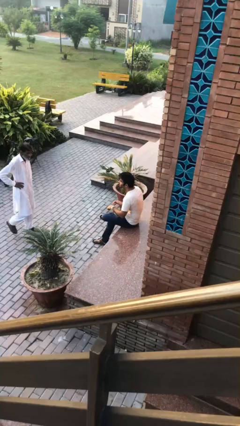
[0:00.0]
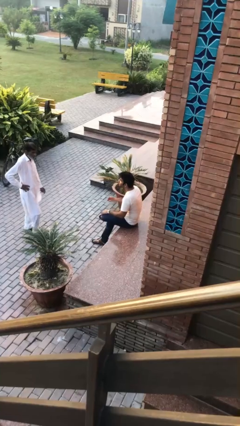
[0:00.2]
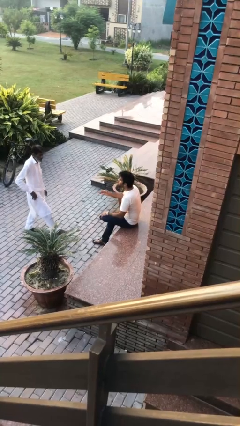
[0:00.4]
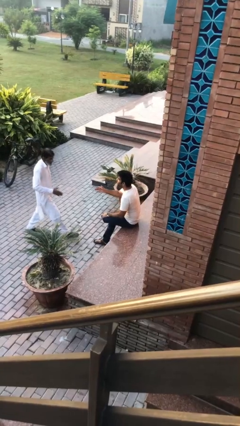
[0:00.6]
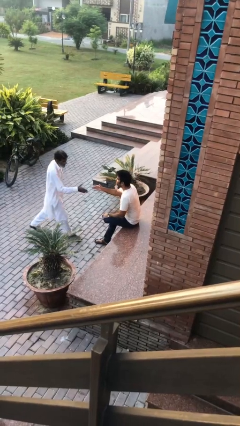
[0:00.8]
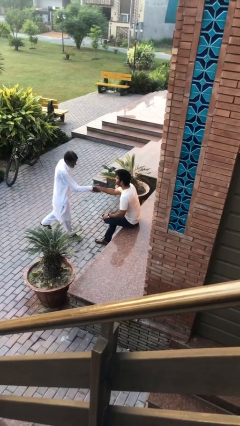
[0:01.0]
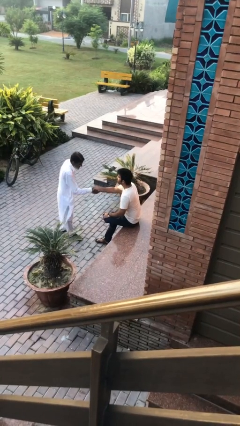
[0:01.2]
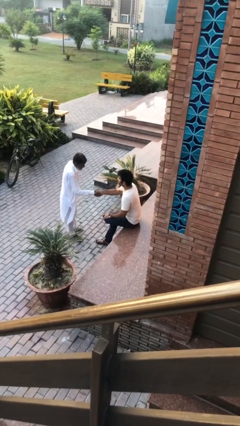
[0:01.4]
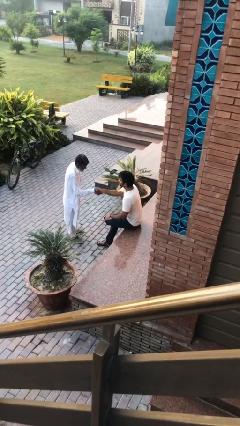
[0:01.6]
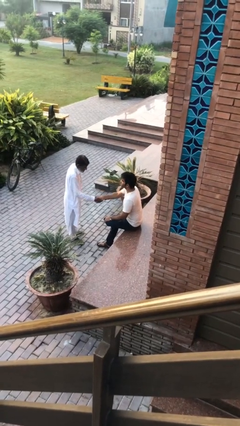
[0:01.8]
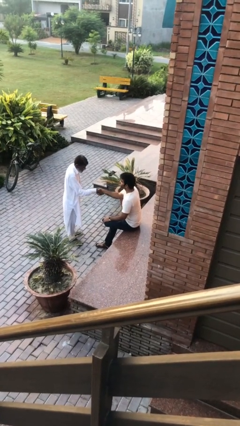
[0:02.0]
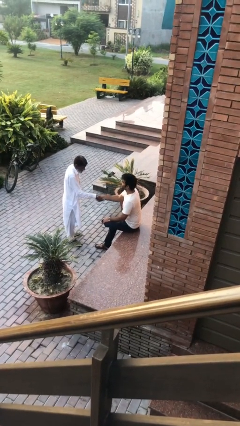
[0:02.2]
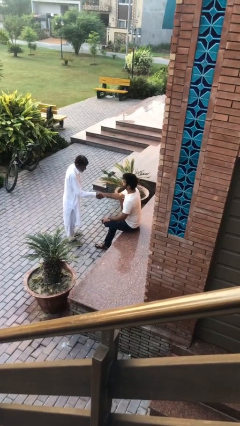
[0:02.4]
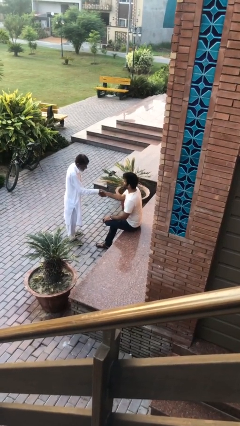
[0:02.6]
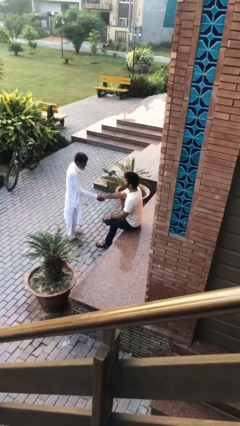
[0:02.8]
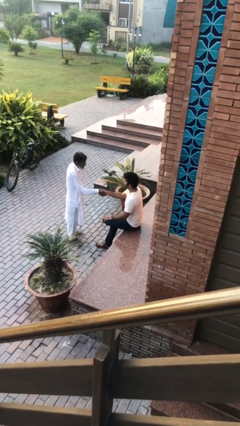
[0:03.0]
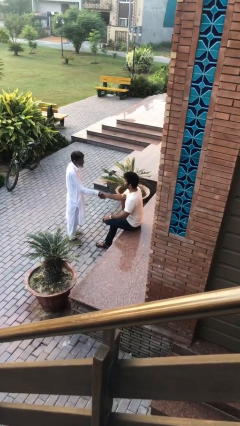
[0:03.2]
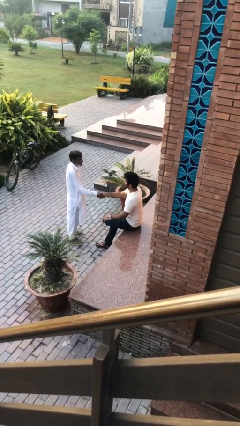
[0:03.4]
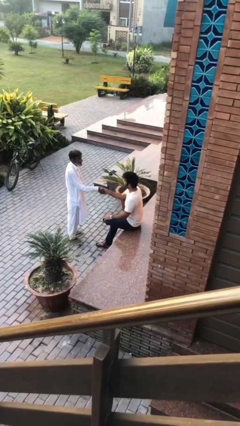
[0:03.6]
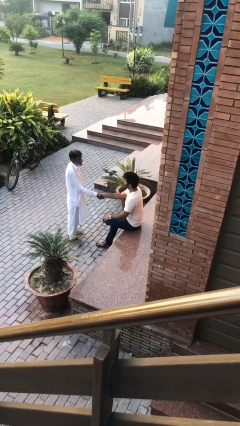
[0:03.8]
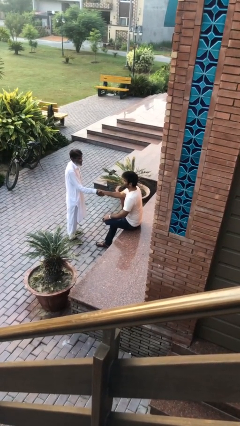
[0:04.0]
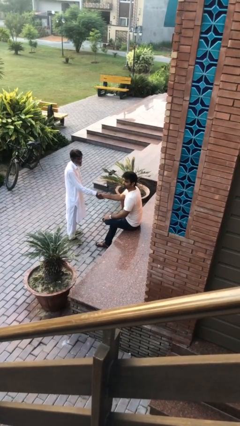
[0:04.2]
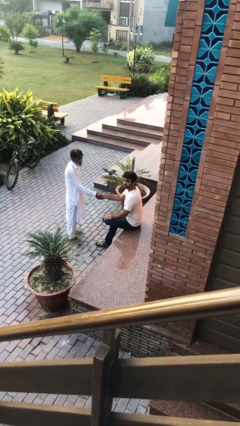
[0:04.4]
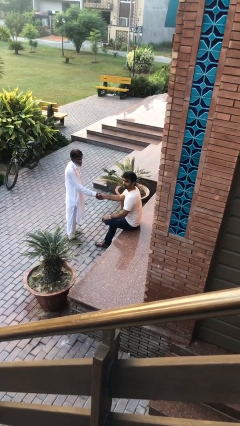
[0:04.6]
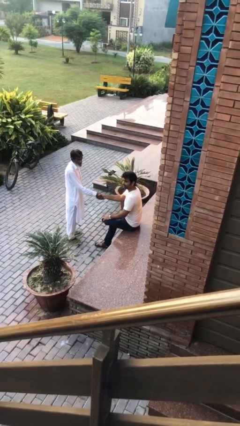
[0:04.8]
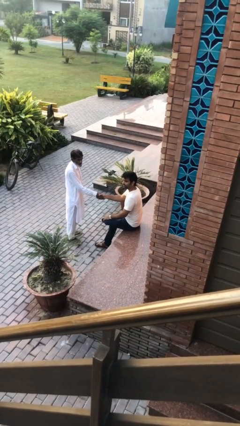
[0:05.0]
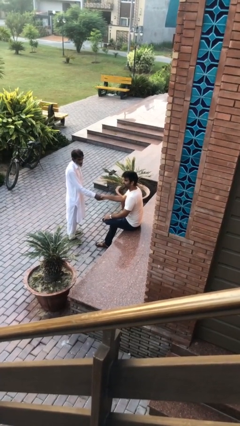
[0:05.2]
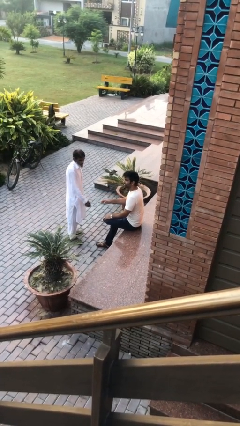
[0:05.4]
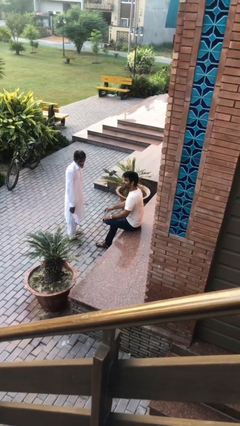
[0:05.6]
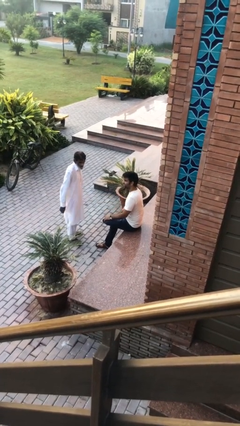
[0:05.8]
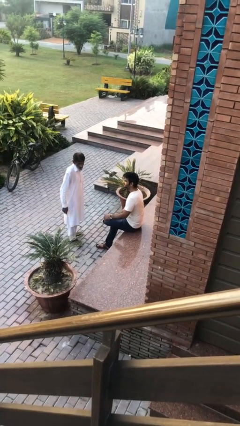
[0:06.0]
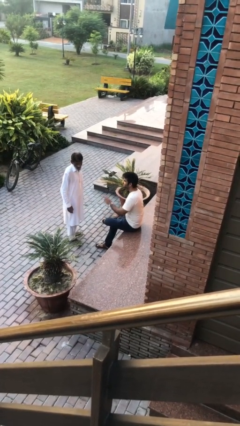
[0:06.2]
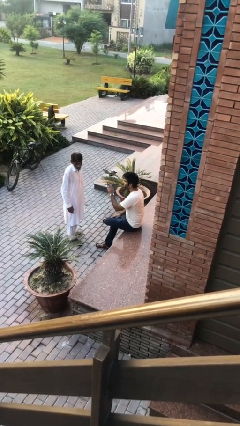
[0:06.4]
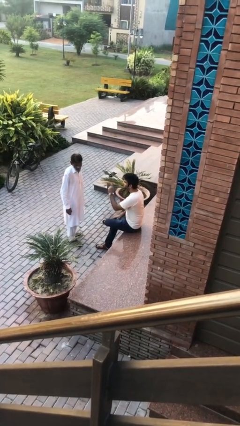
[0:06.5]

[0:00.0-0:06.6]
person shakes hand

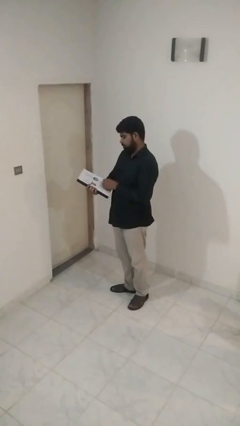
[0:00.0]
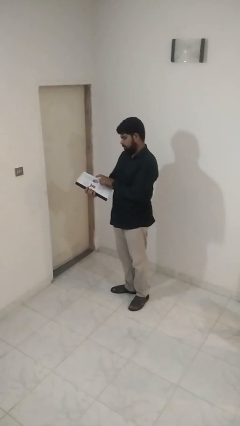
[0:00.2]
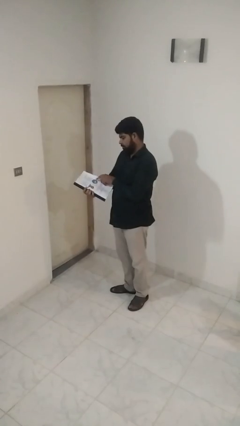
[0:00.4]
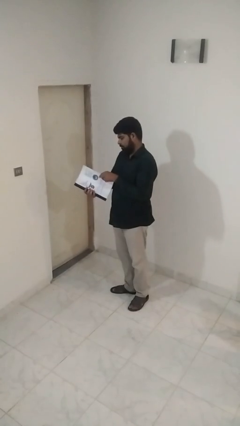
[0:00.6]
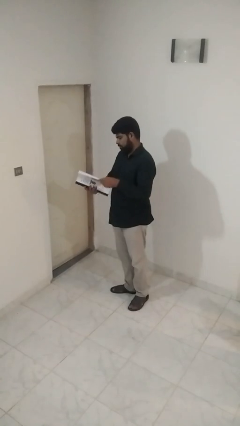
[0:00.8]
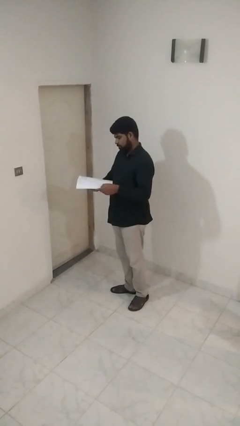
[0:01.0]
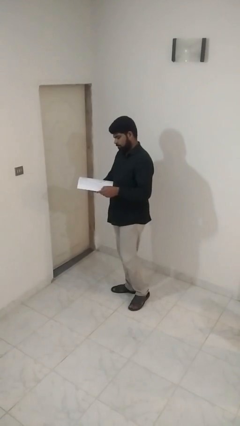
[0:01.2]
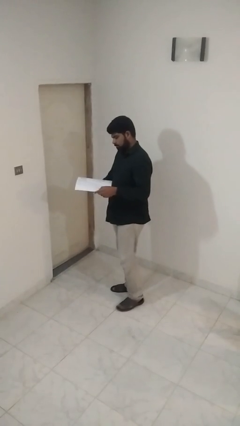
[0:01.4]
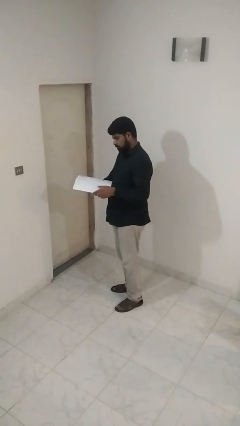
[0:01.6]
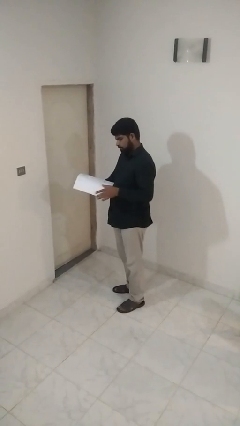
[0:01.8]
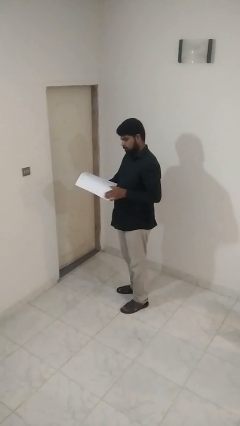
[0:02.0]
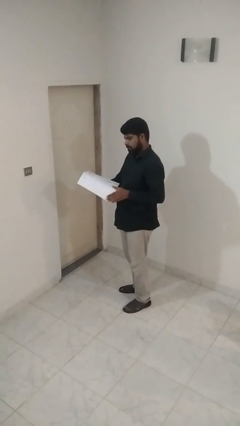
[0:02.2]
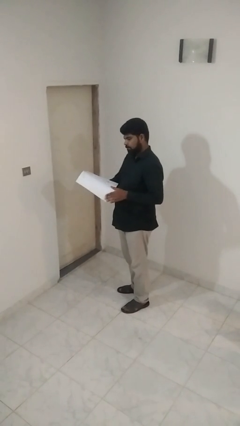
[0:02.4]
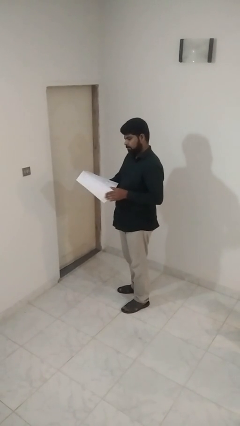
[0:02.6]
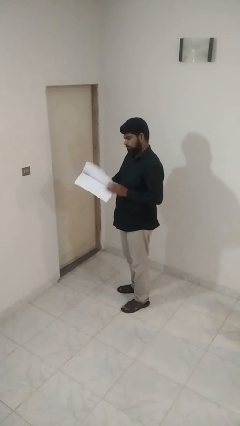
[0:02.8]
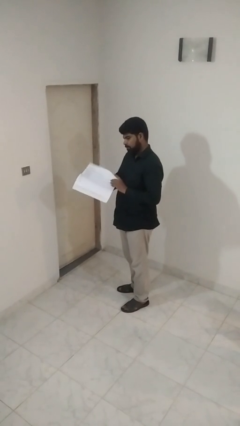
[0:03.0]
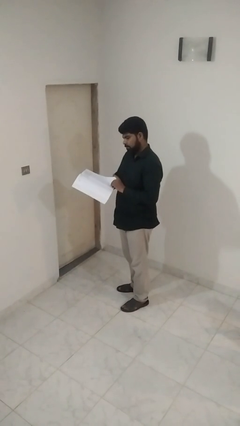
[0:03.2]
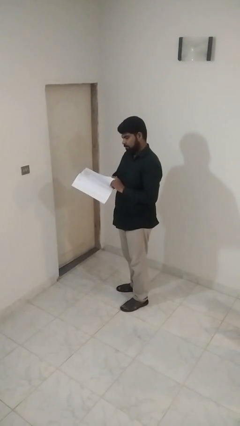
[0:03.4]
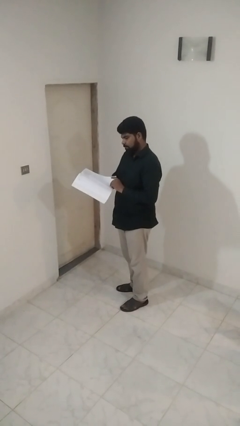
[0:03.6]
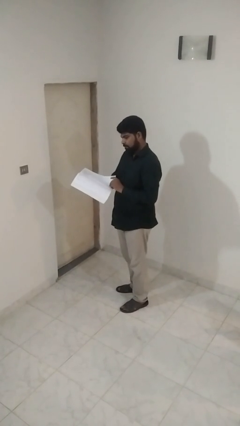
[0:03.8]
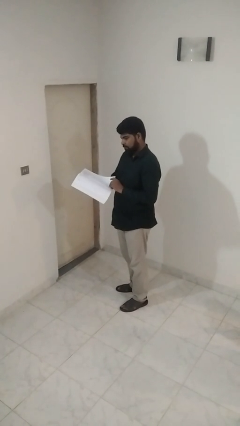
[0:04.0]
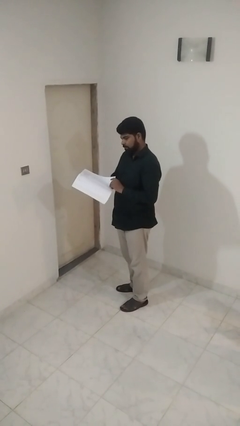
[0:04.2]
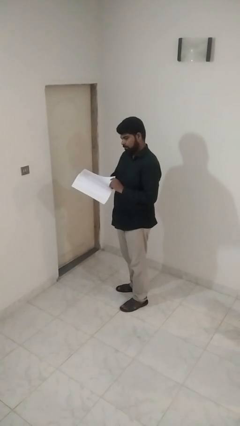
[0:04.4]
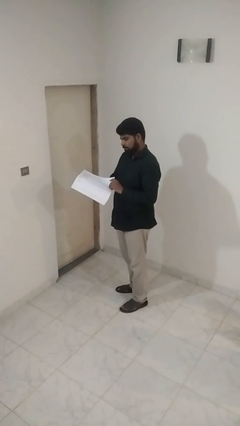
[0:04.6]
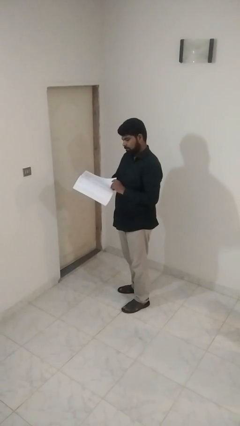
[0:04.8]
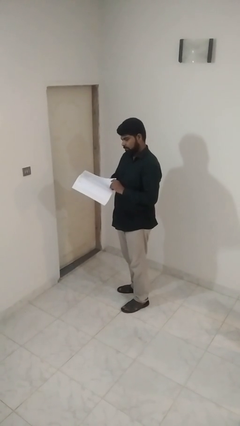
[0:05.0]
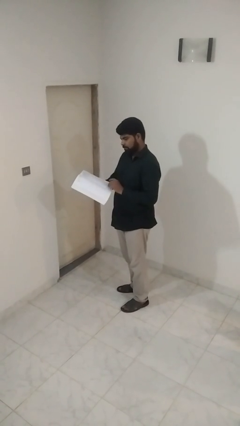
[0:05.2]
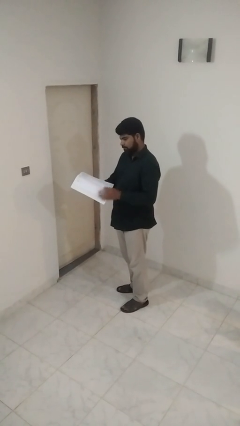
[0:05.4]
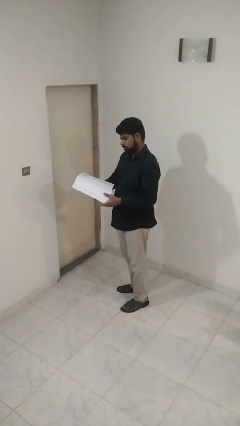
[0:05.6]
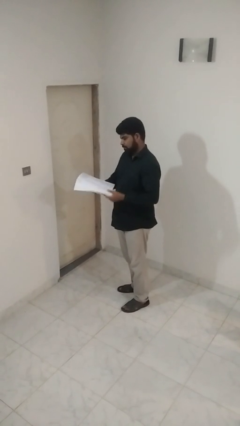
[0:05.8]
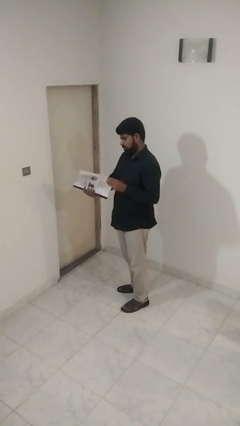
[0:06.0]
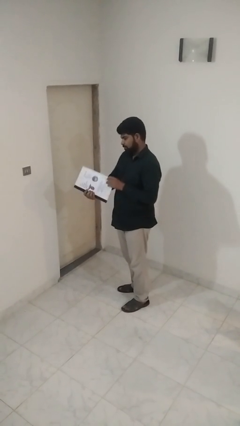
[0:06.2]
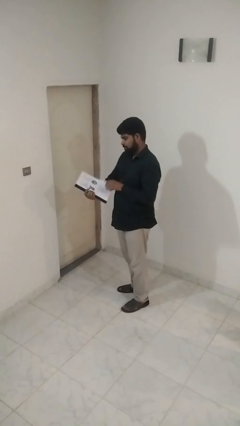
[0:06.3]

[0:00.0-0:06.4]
person reads book

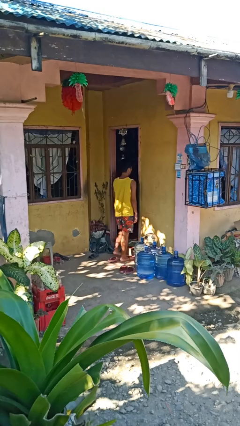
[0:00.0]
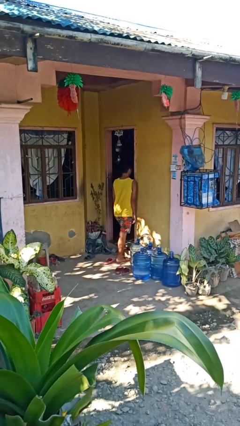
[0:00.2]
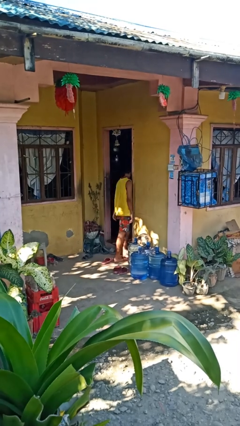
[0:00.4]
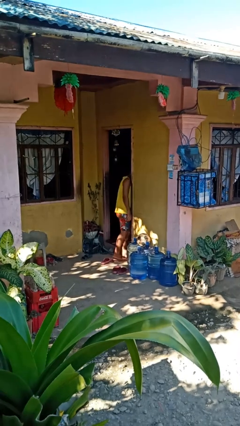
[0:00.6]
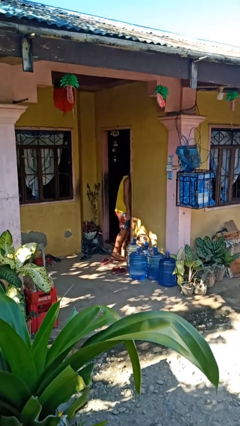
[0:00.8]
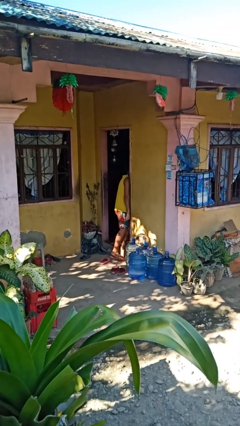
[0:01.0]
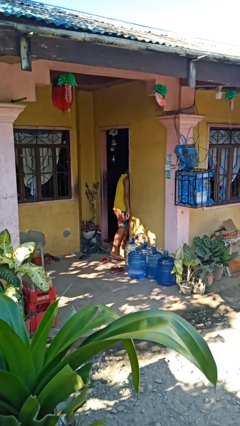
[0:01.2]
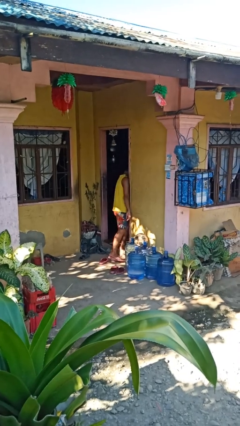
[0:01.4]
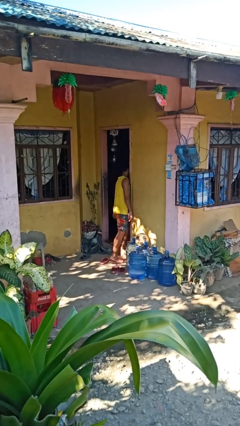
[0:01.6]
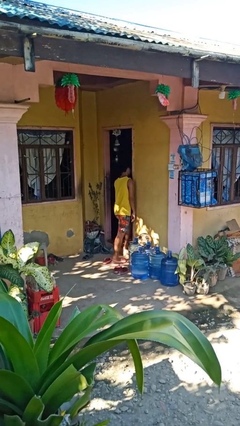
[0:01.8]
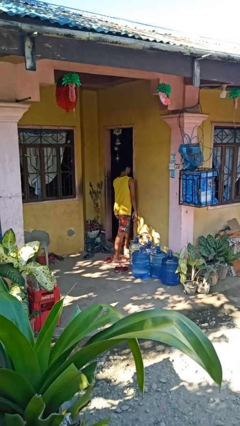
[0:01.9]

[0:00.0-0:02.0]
person bumps into wall

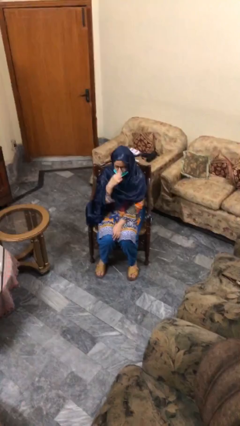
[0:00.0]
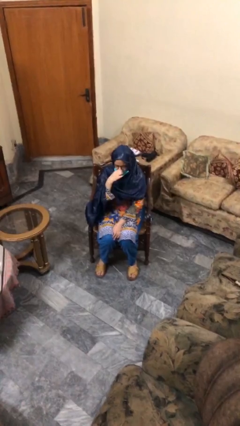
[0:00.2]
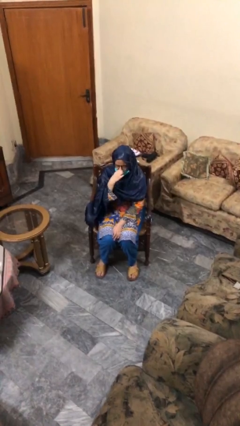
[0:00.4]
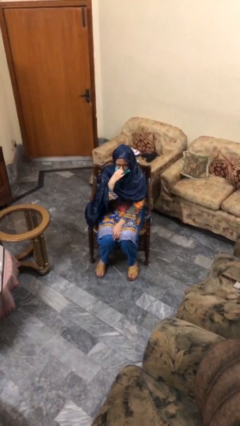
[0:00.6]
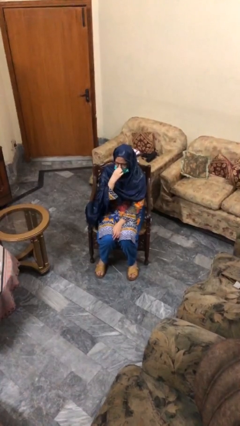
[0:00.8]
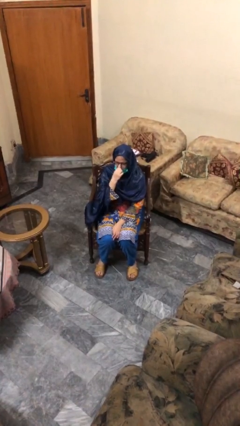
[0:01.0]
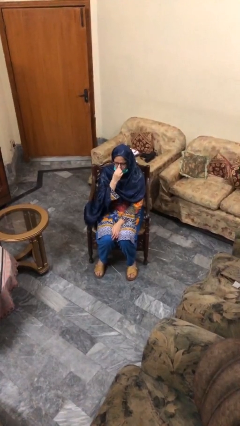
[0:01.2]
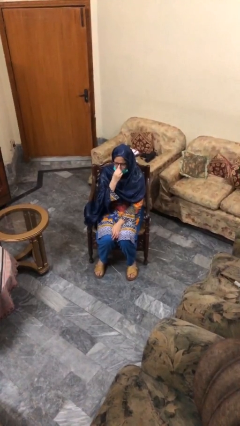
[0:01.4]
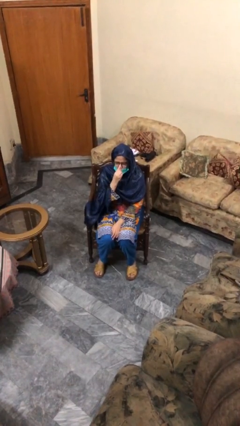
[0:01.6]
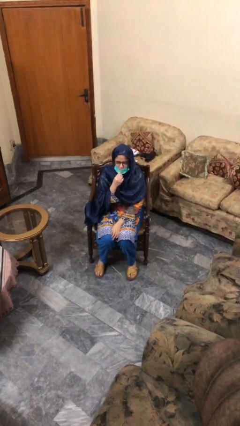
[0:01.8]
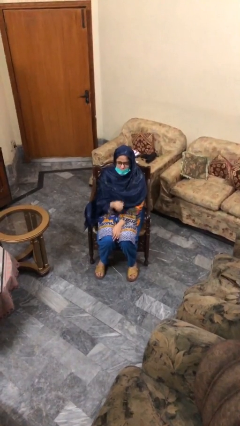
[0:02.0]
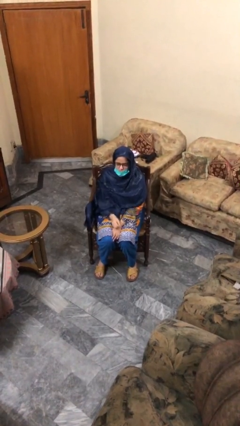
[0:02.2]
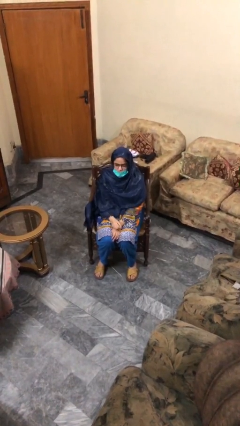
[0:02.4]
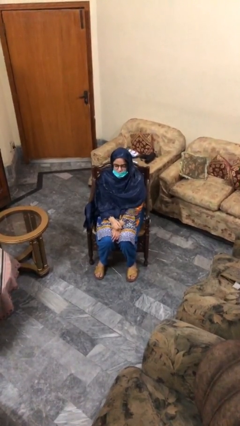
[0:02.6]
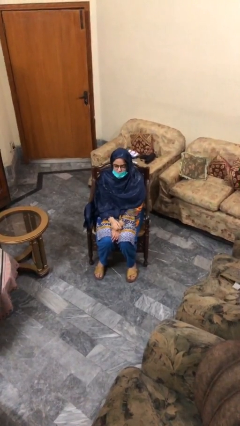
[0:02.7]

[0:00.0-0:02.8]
person blows nose
